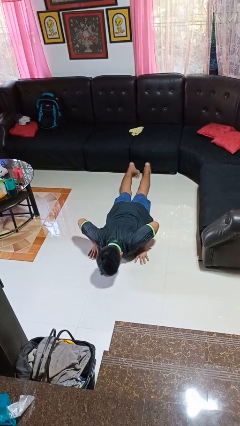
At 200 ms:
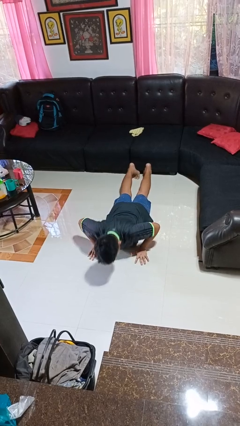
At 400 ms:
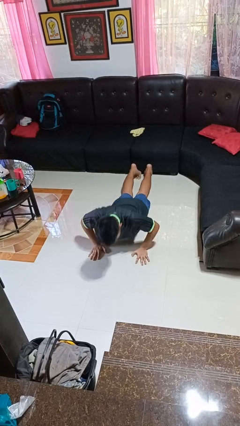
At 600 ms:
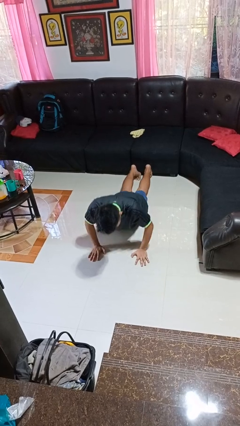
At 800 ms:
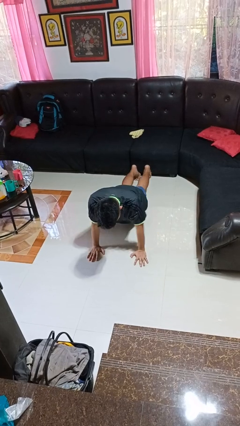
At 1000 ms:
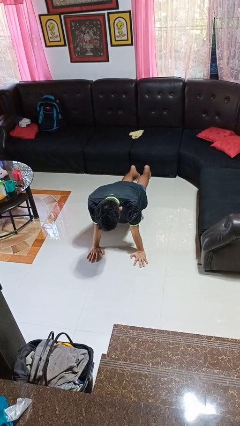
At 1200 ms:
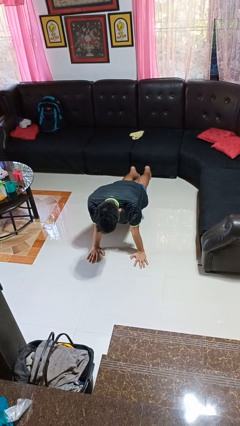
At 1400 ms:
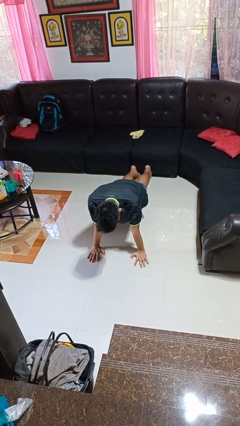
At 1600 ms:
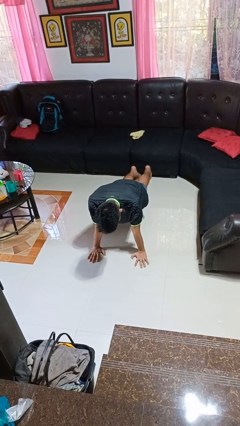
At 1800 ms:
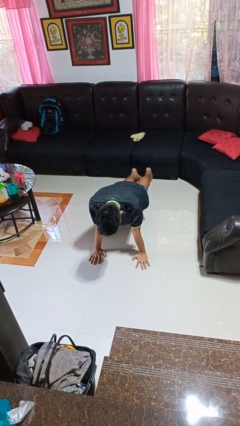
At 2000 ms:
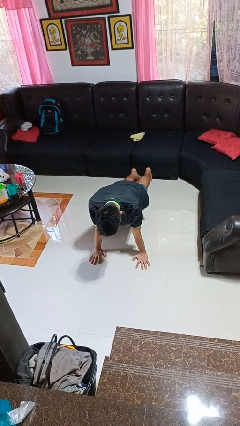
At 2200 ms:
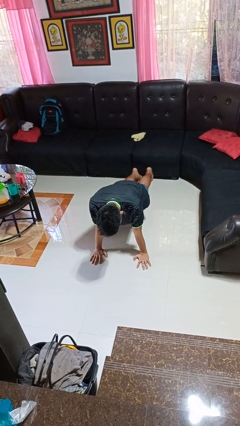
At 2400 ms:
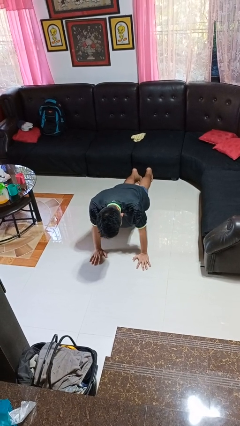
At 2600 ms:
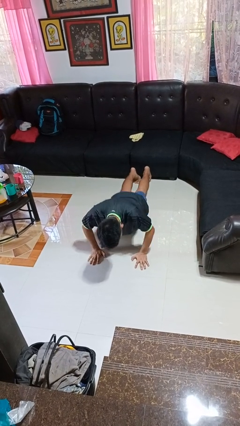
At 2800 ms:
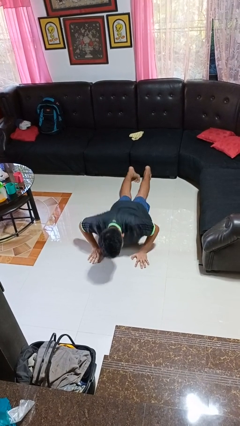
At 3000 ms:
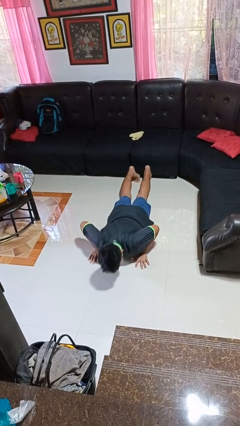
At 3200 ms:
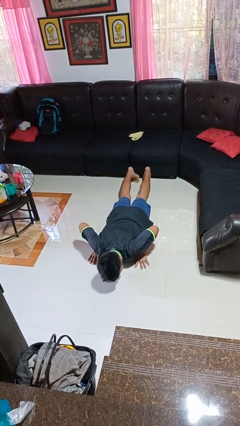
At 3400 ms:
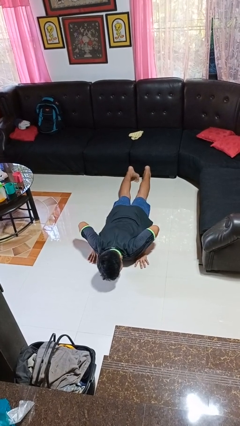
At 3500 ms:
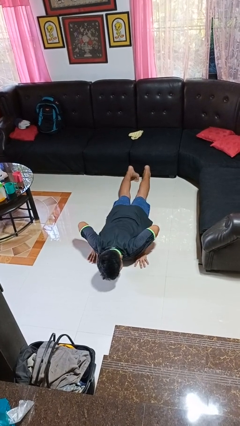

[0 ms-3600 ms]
person exercises with pushup

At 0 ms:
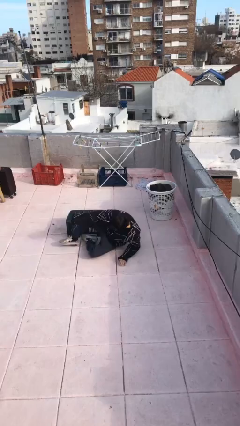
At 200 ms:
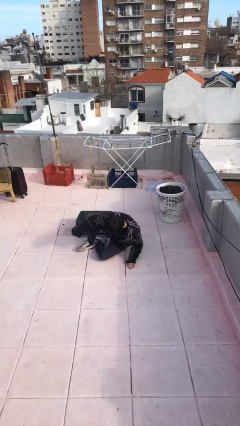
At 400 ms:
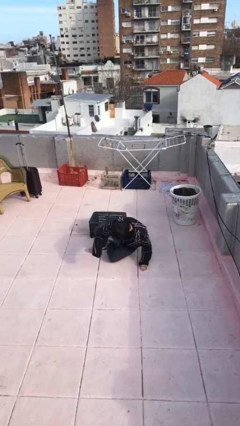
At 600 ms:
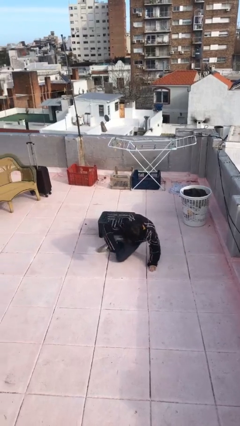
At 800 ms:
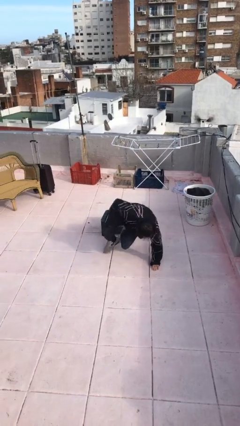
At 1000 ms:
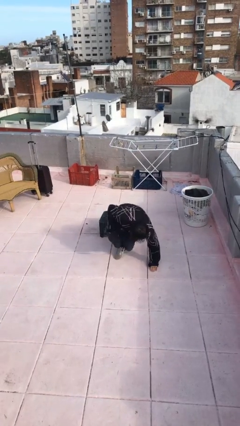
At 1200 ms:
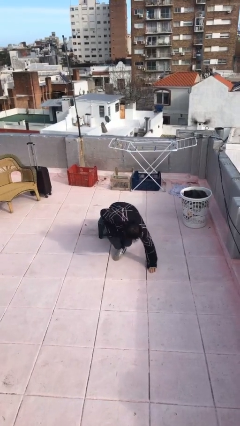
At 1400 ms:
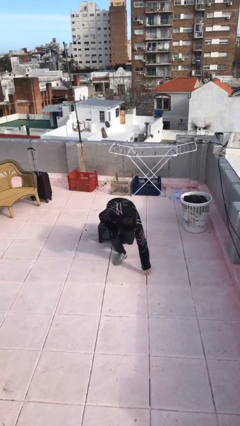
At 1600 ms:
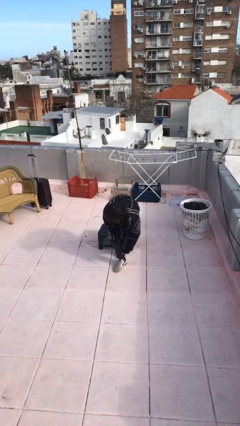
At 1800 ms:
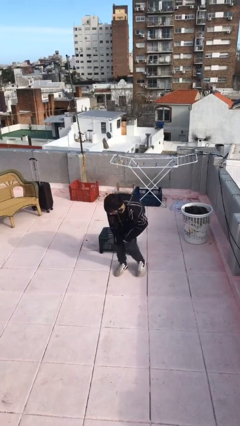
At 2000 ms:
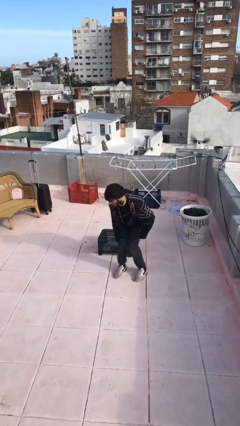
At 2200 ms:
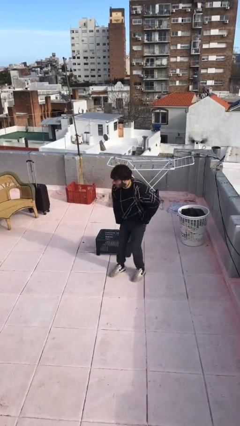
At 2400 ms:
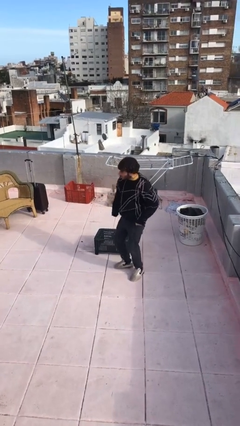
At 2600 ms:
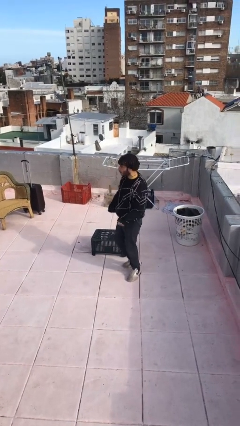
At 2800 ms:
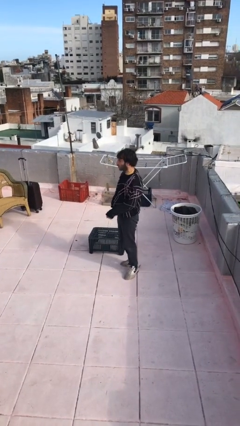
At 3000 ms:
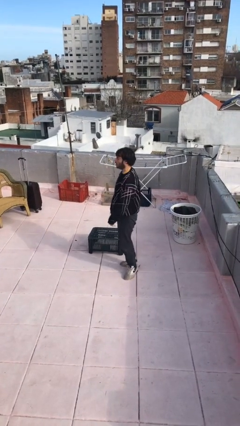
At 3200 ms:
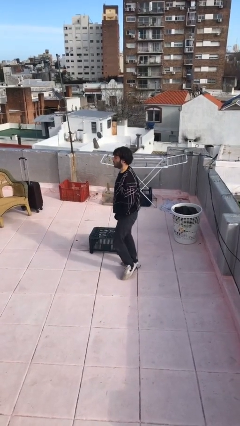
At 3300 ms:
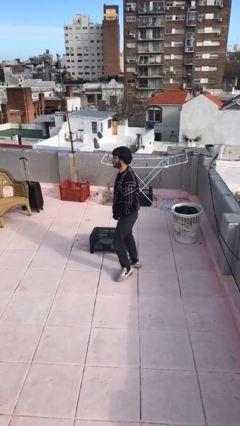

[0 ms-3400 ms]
person stands up from floor

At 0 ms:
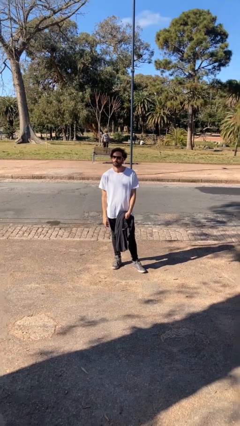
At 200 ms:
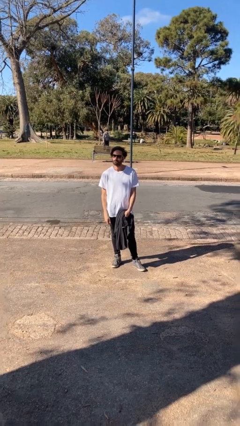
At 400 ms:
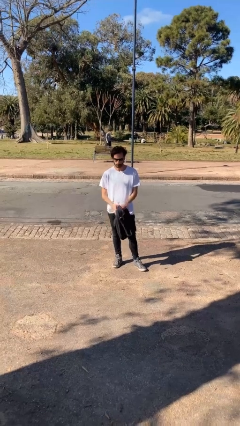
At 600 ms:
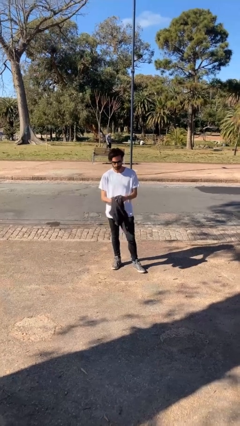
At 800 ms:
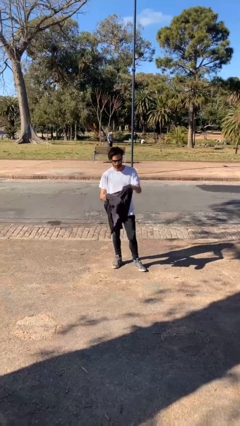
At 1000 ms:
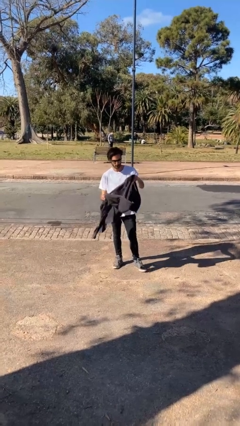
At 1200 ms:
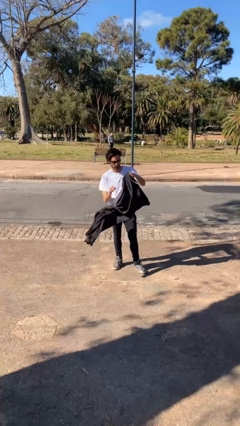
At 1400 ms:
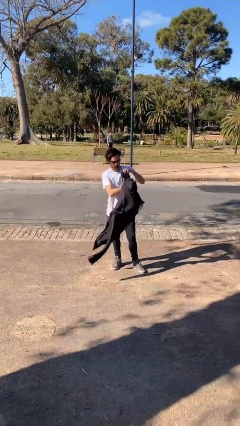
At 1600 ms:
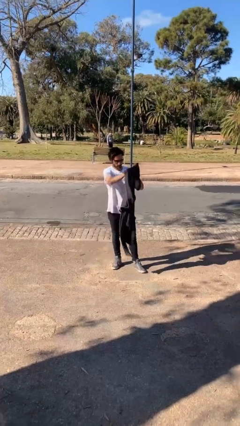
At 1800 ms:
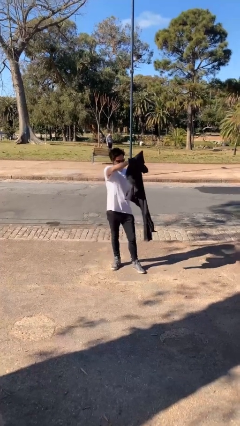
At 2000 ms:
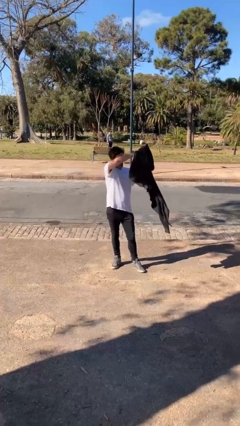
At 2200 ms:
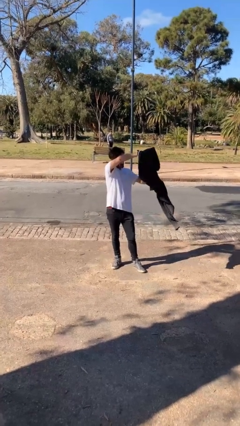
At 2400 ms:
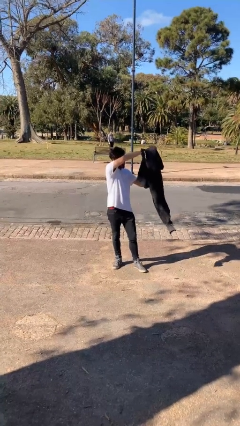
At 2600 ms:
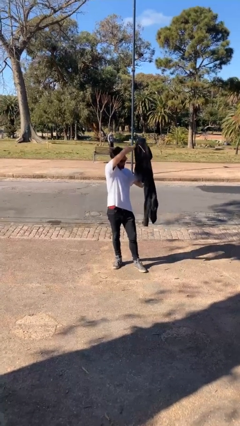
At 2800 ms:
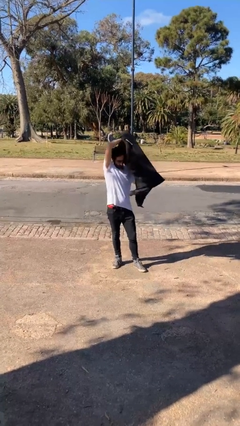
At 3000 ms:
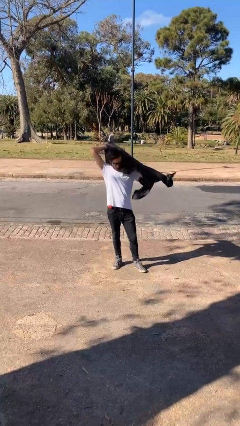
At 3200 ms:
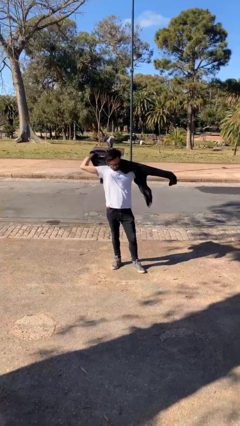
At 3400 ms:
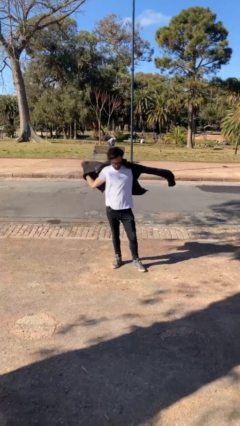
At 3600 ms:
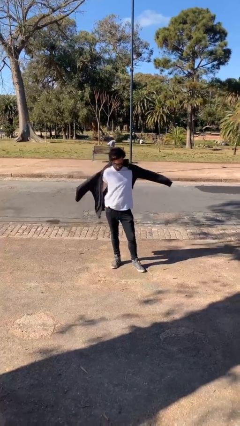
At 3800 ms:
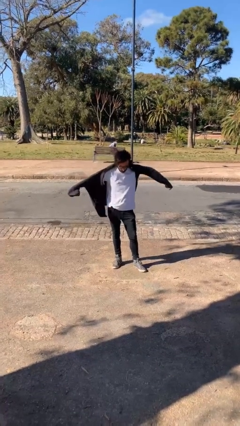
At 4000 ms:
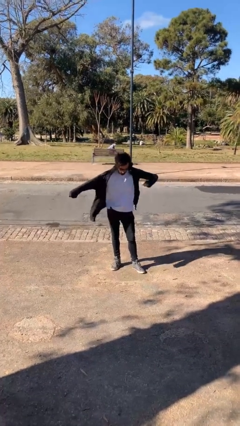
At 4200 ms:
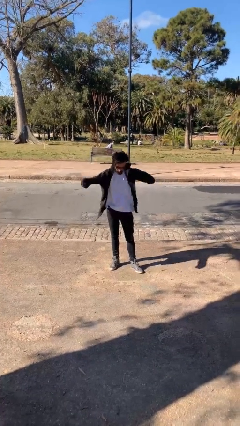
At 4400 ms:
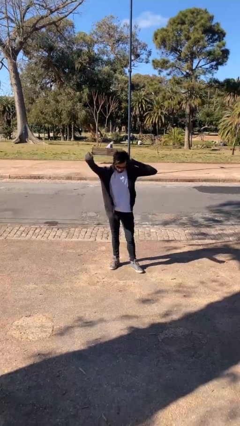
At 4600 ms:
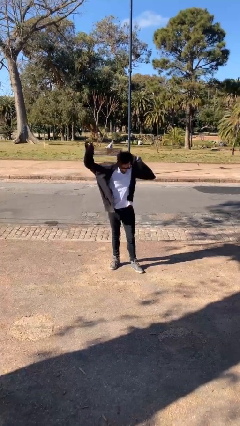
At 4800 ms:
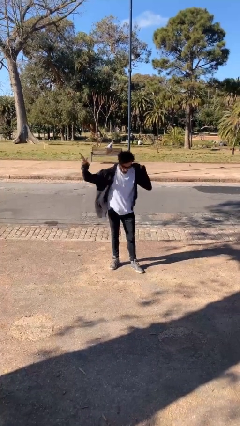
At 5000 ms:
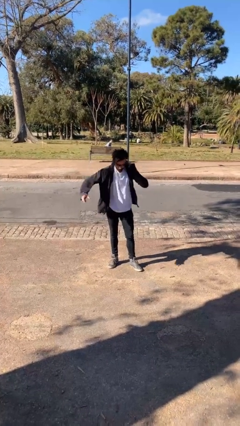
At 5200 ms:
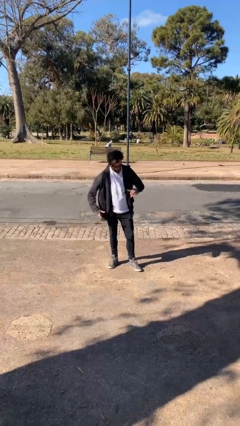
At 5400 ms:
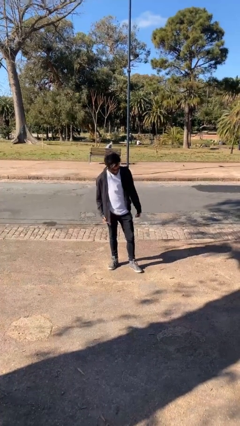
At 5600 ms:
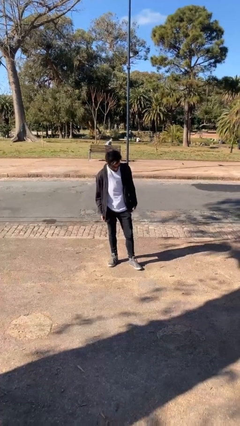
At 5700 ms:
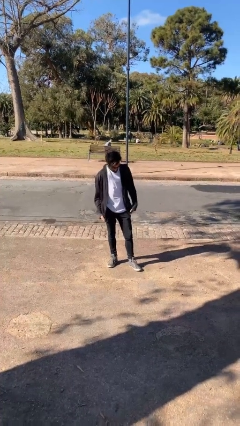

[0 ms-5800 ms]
person puts on jacket

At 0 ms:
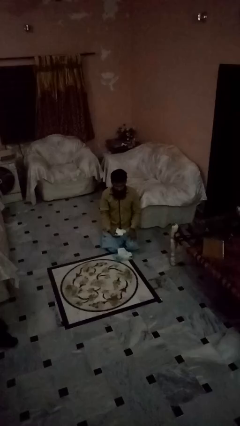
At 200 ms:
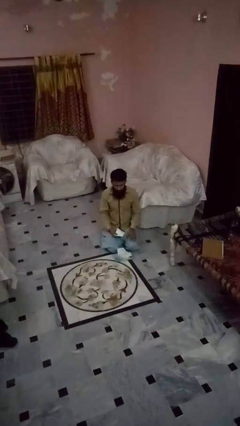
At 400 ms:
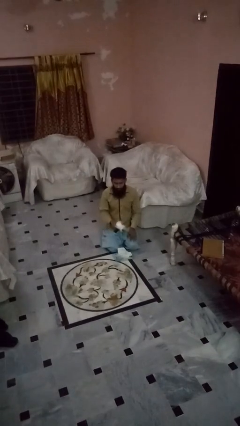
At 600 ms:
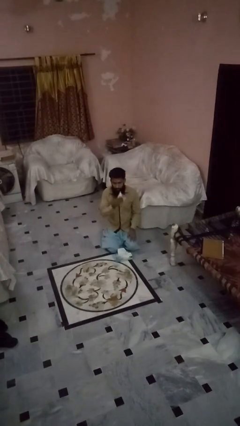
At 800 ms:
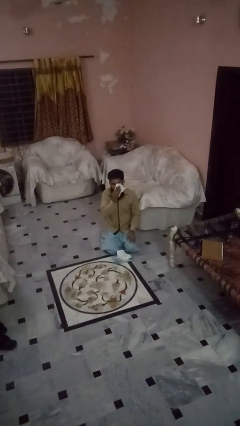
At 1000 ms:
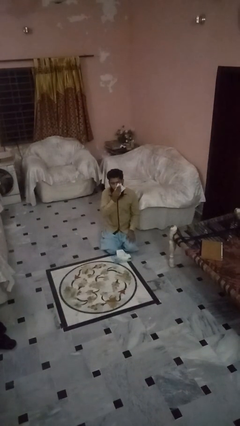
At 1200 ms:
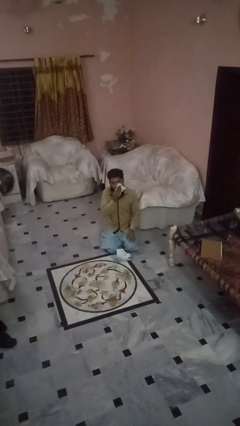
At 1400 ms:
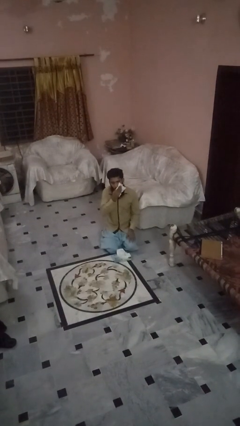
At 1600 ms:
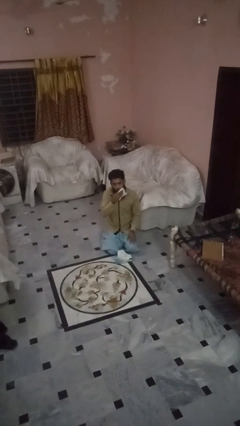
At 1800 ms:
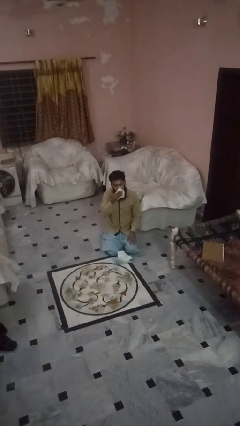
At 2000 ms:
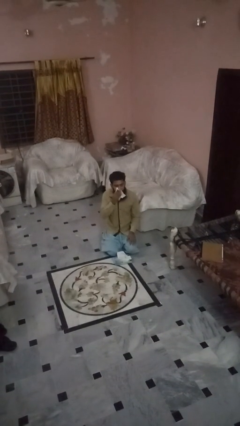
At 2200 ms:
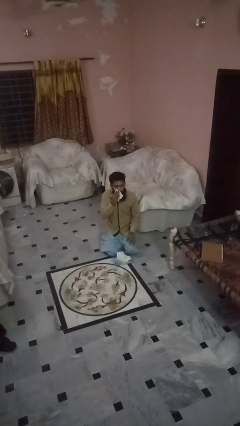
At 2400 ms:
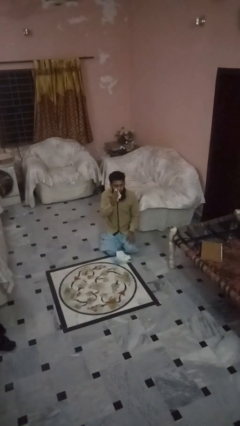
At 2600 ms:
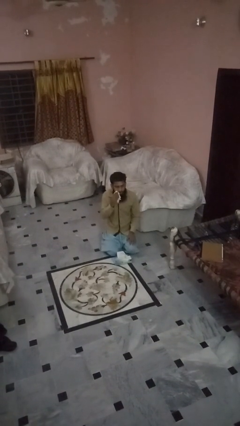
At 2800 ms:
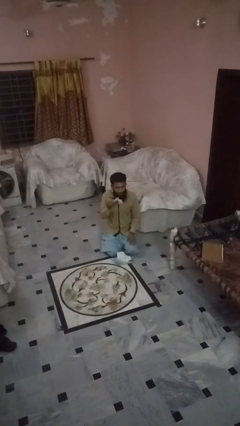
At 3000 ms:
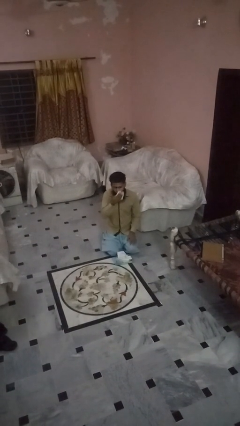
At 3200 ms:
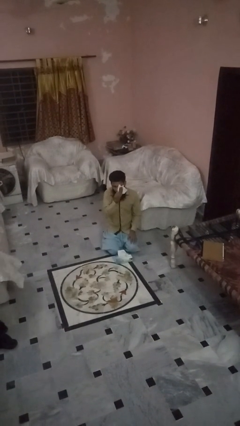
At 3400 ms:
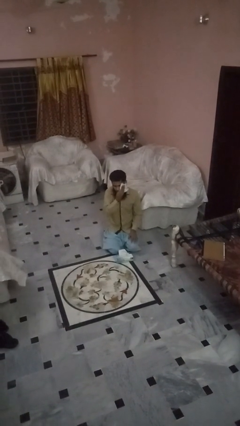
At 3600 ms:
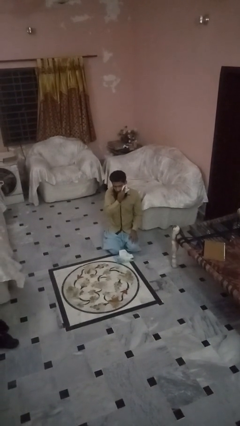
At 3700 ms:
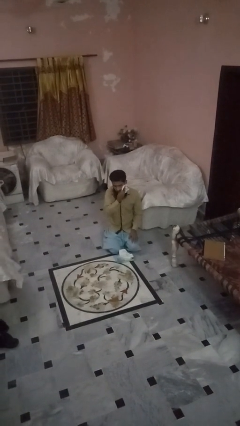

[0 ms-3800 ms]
person wipes mouth with napkin

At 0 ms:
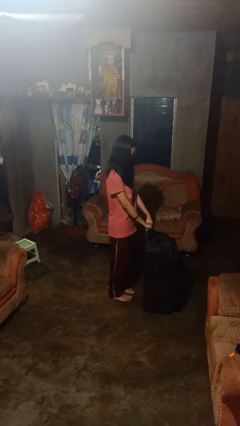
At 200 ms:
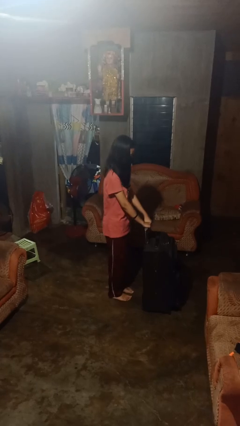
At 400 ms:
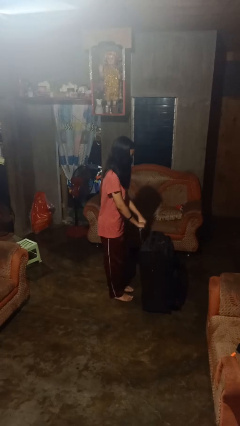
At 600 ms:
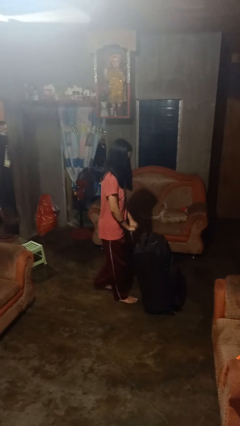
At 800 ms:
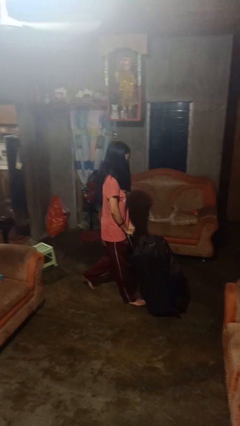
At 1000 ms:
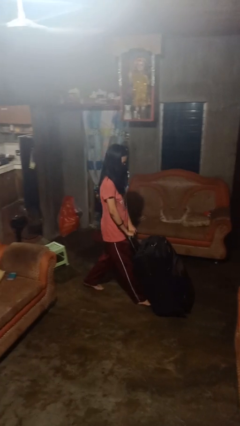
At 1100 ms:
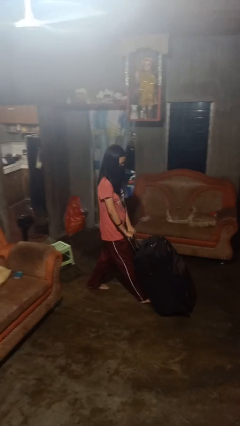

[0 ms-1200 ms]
person pulls wheeled cart
